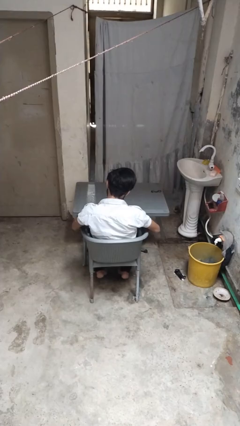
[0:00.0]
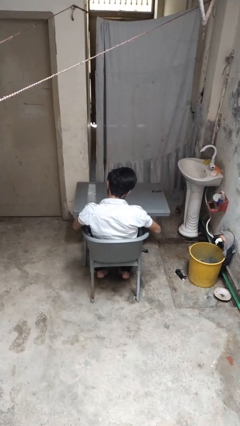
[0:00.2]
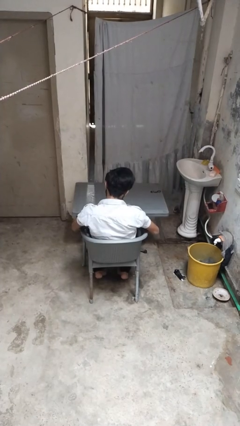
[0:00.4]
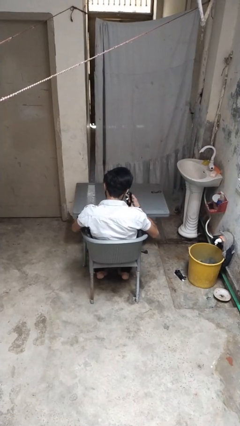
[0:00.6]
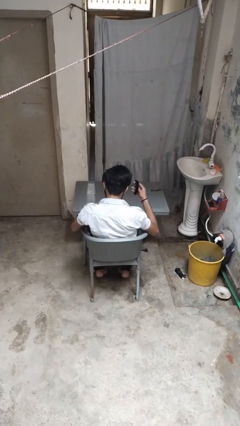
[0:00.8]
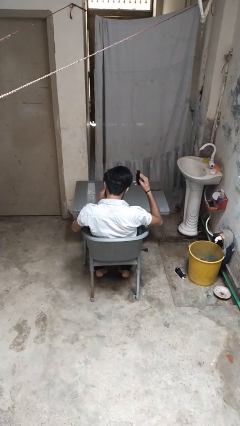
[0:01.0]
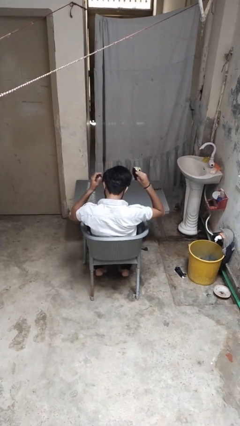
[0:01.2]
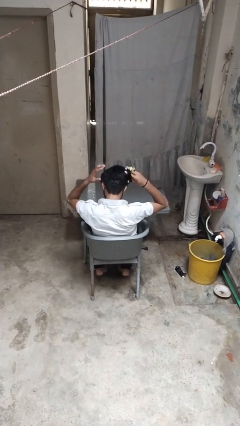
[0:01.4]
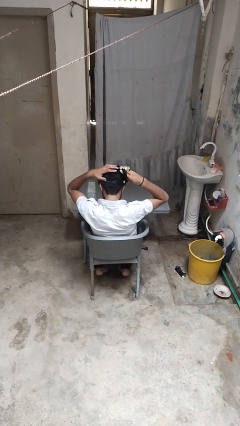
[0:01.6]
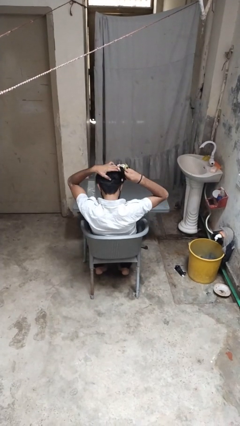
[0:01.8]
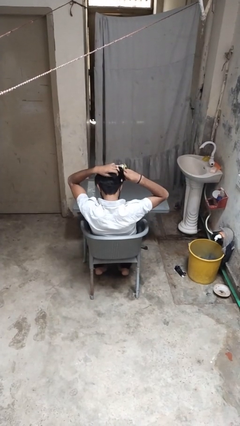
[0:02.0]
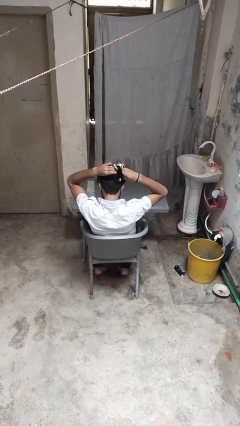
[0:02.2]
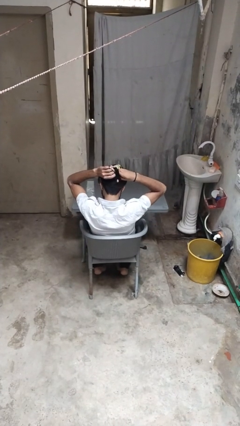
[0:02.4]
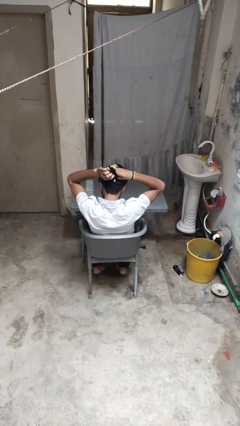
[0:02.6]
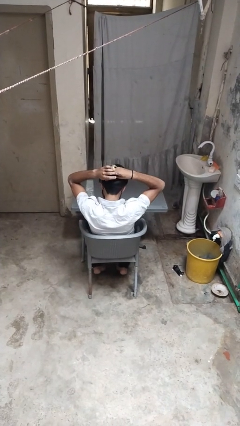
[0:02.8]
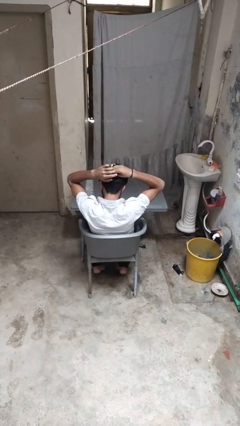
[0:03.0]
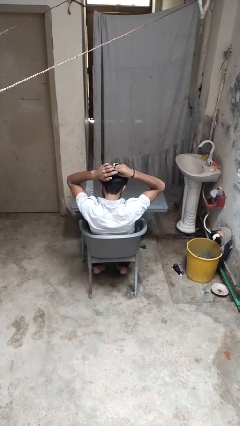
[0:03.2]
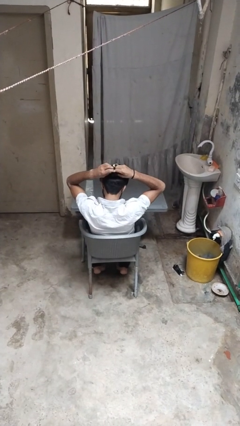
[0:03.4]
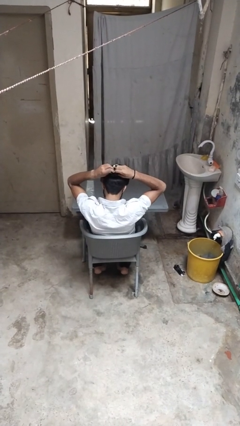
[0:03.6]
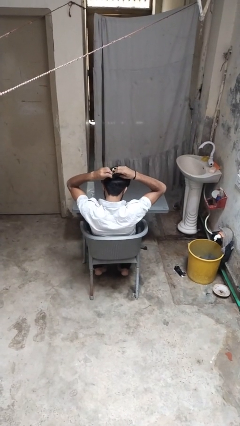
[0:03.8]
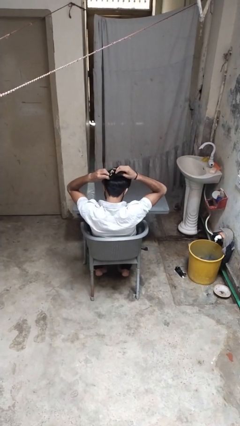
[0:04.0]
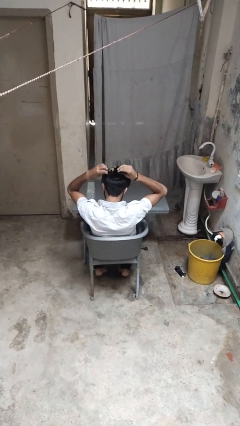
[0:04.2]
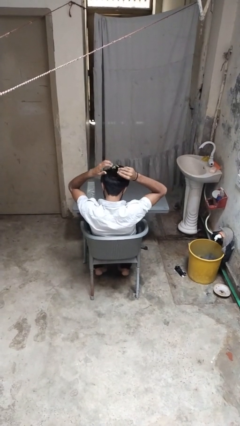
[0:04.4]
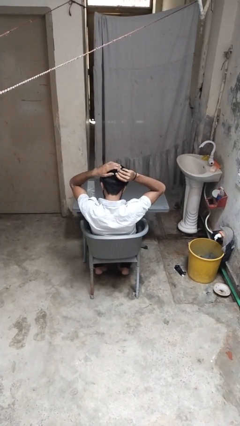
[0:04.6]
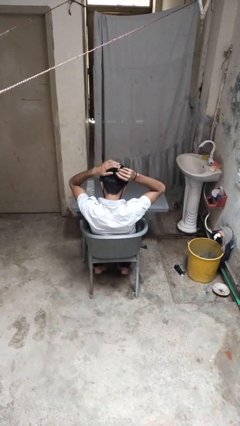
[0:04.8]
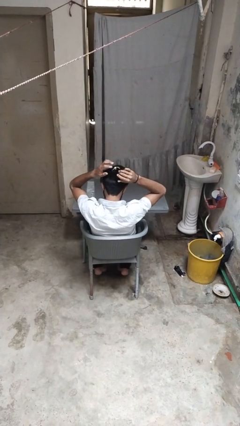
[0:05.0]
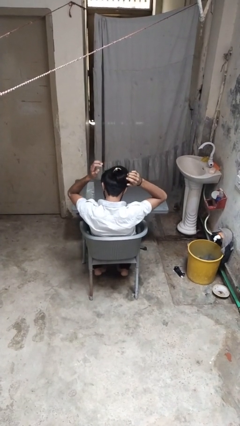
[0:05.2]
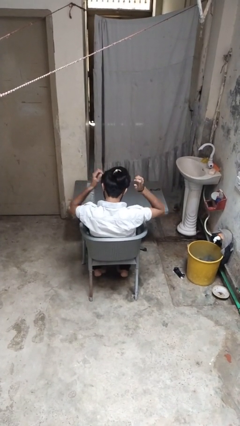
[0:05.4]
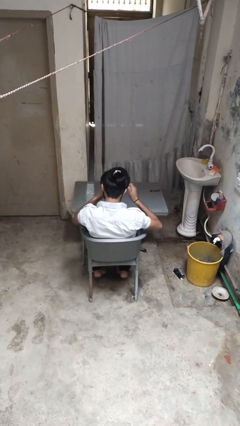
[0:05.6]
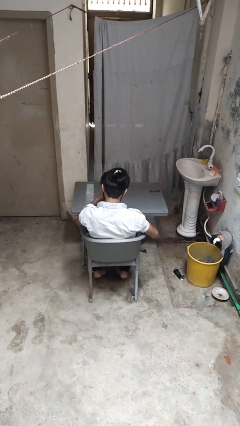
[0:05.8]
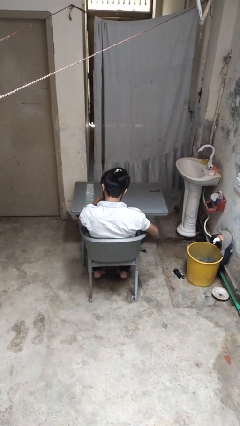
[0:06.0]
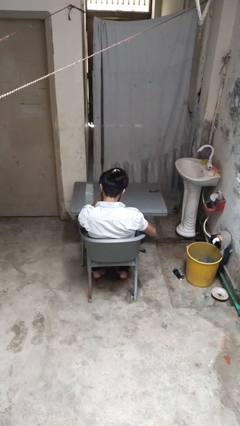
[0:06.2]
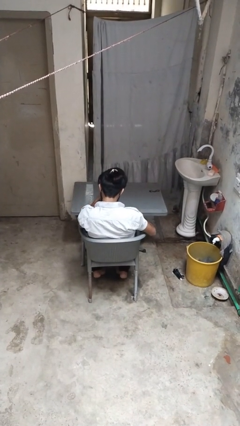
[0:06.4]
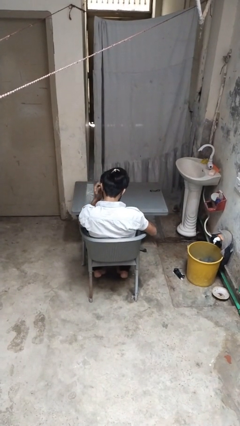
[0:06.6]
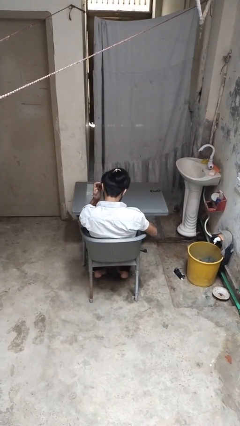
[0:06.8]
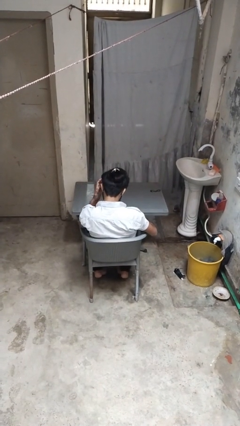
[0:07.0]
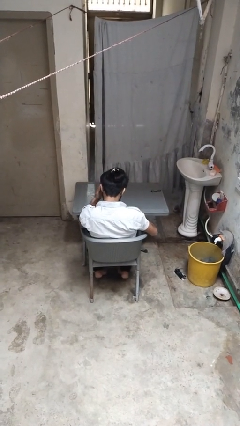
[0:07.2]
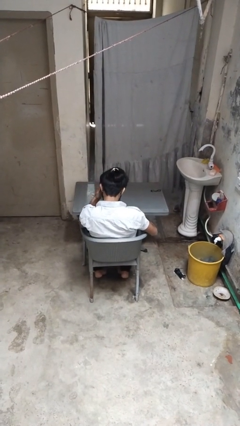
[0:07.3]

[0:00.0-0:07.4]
person puts hair in ponytail

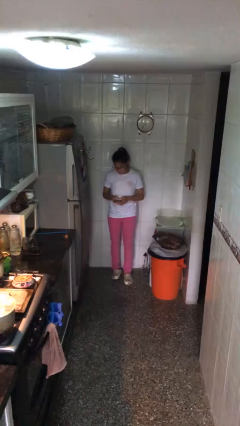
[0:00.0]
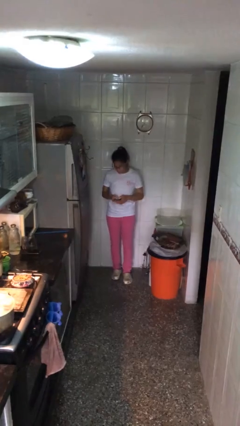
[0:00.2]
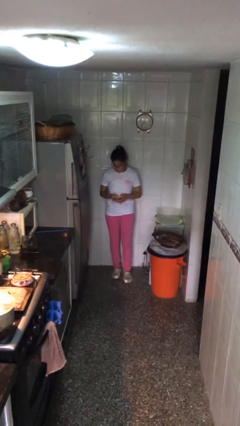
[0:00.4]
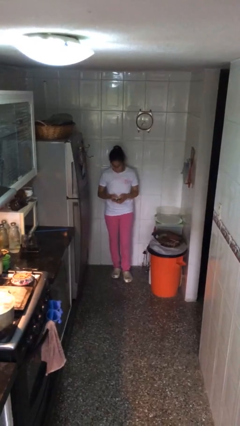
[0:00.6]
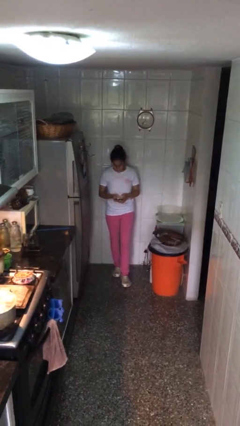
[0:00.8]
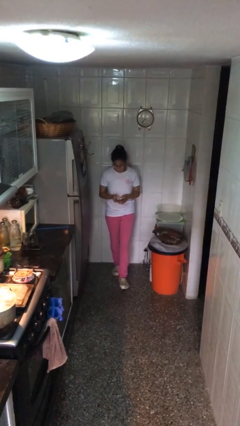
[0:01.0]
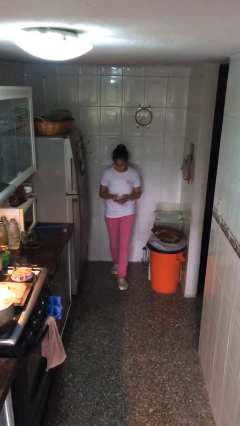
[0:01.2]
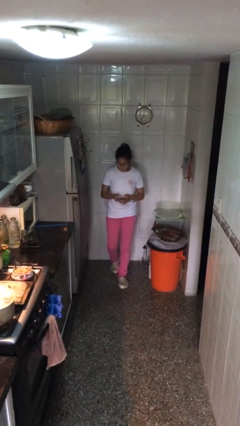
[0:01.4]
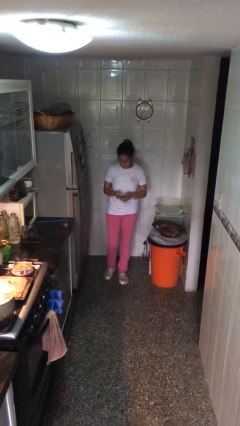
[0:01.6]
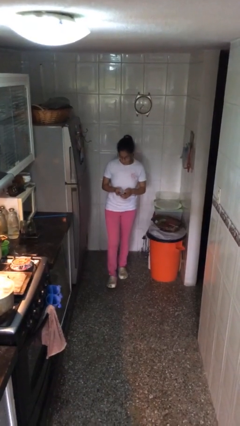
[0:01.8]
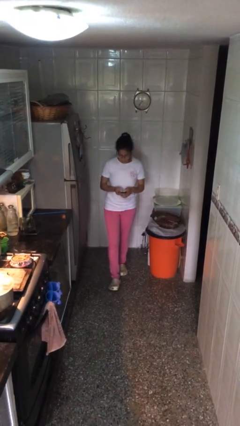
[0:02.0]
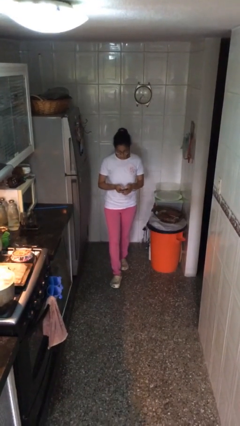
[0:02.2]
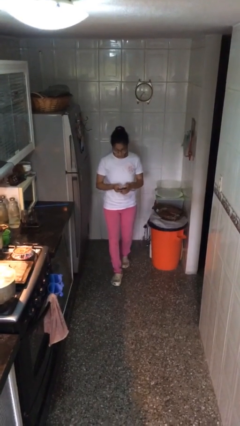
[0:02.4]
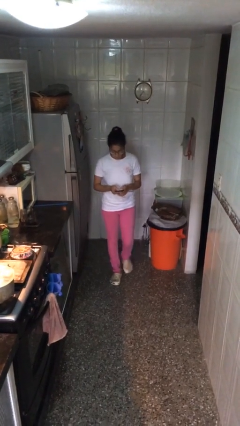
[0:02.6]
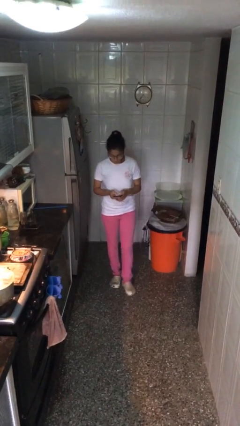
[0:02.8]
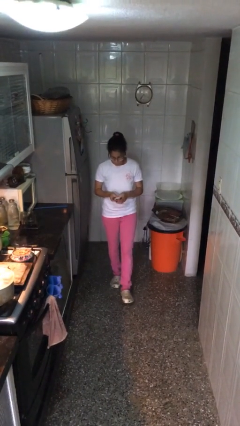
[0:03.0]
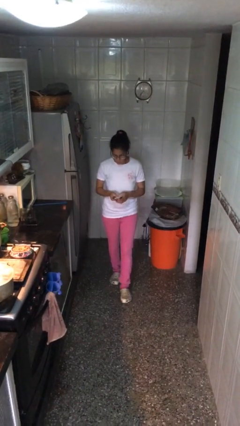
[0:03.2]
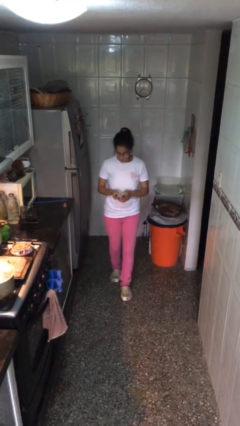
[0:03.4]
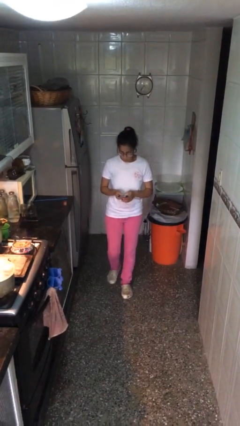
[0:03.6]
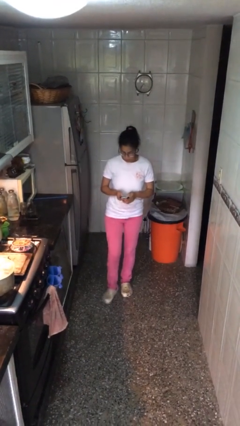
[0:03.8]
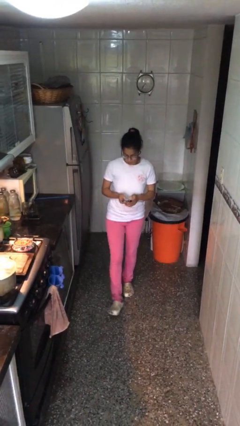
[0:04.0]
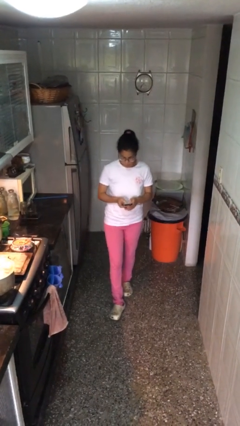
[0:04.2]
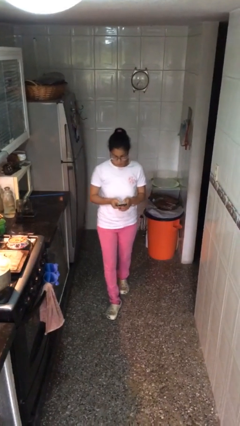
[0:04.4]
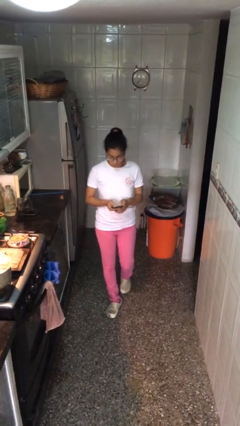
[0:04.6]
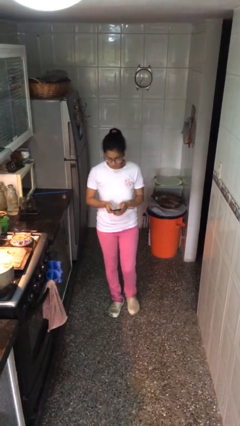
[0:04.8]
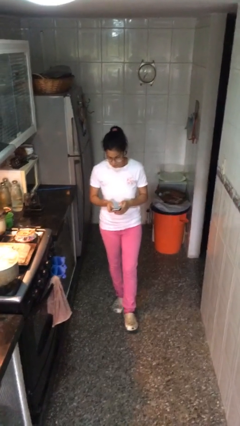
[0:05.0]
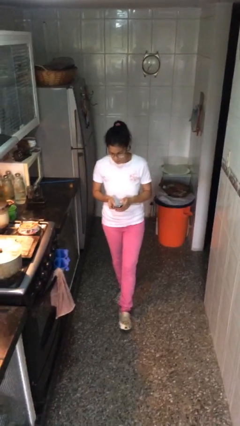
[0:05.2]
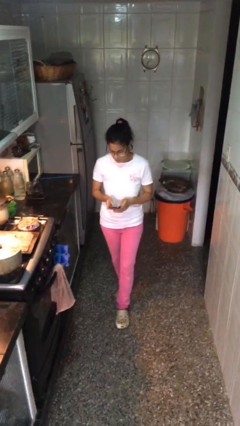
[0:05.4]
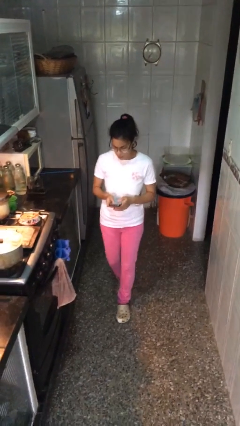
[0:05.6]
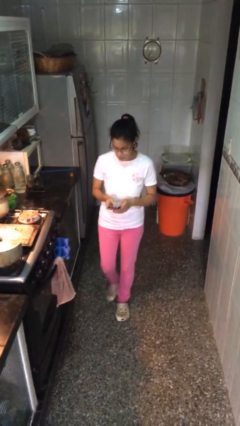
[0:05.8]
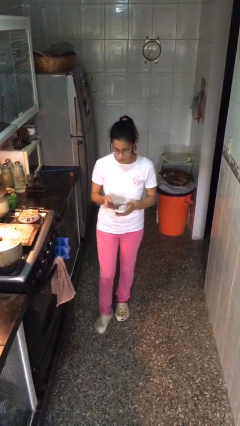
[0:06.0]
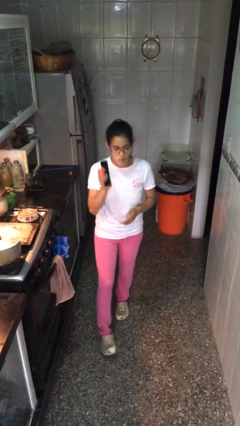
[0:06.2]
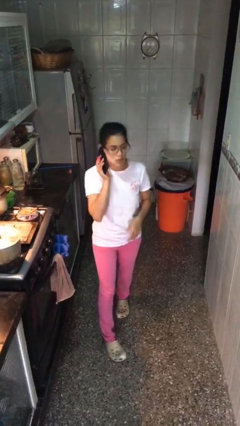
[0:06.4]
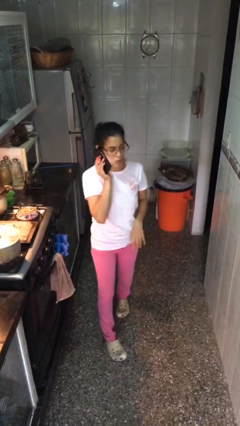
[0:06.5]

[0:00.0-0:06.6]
person texts on phone

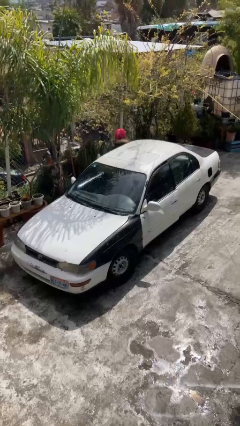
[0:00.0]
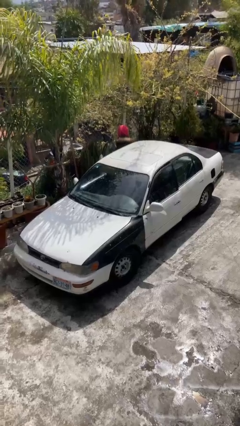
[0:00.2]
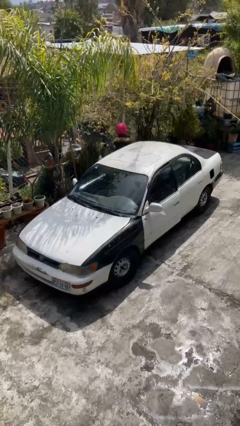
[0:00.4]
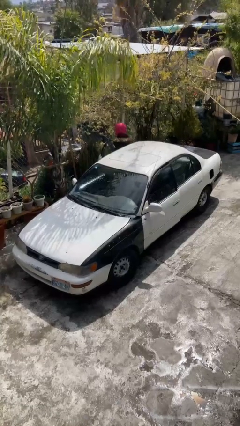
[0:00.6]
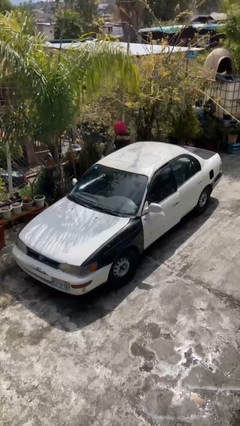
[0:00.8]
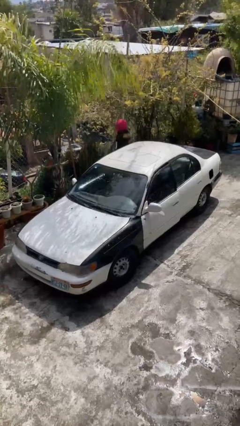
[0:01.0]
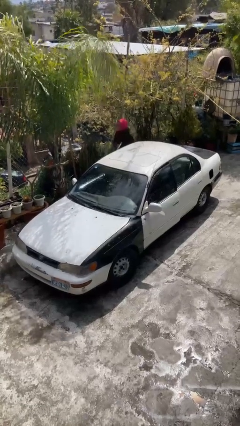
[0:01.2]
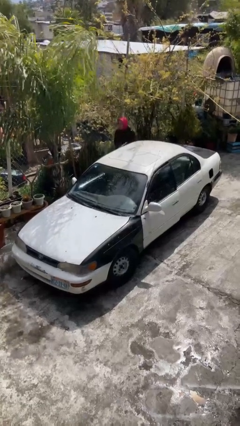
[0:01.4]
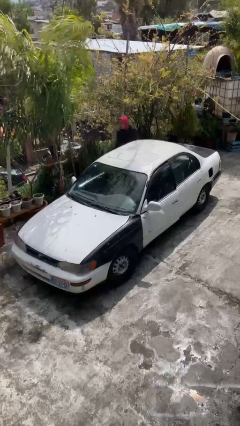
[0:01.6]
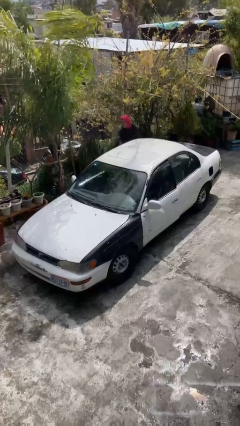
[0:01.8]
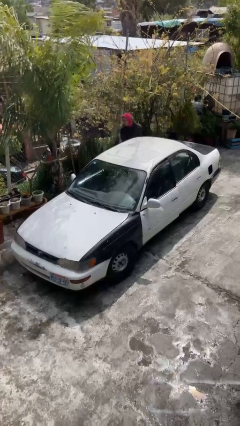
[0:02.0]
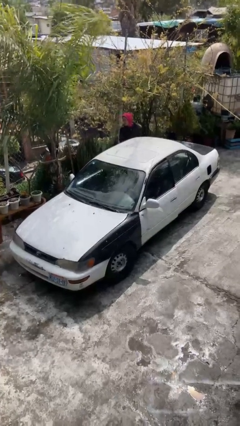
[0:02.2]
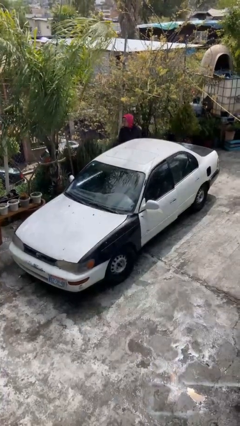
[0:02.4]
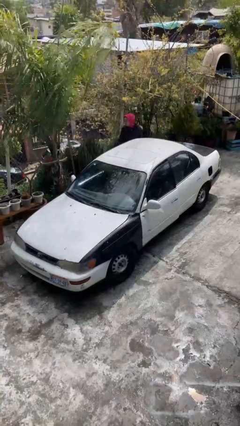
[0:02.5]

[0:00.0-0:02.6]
car drops off person

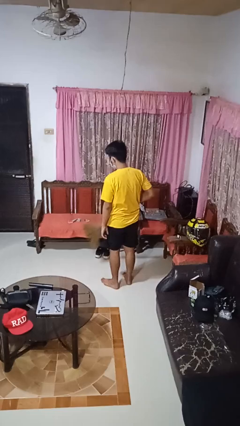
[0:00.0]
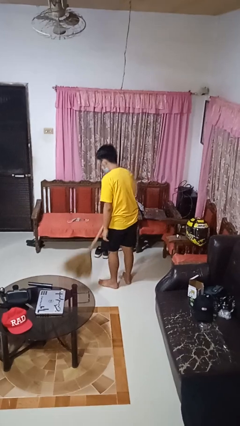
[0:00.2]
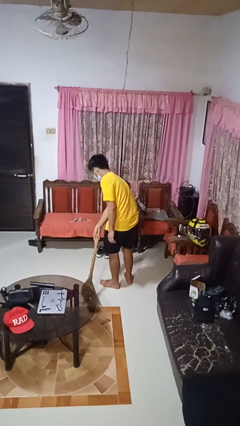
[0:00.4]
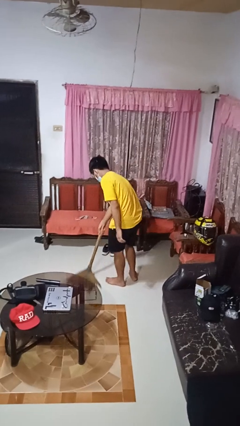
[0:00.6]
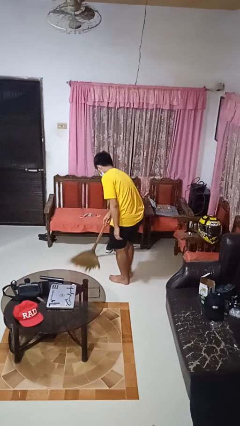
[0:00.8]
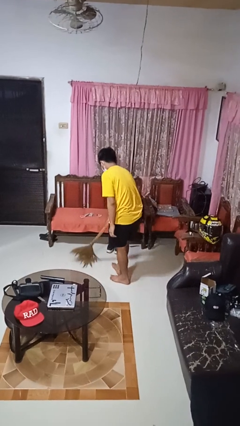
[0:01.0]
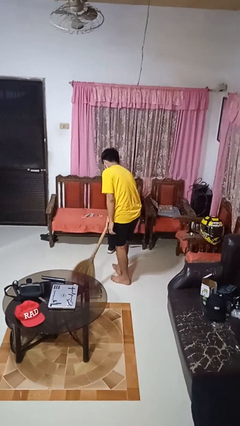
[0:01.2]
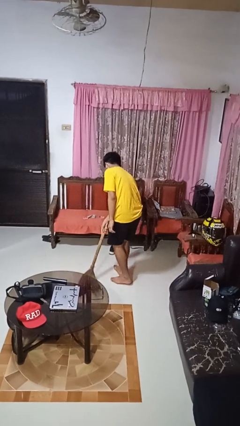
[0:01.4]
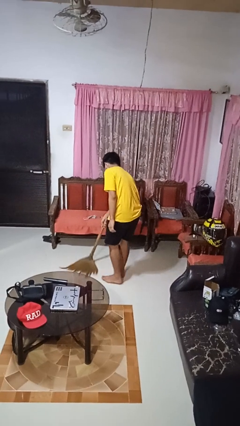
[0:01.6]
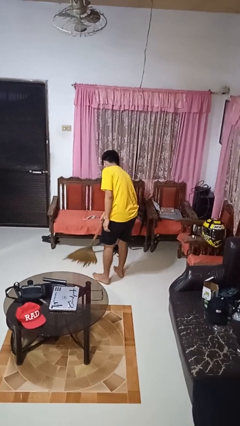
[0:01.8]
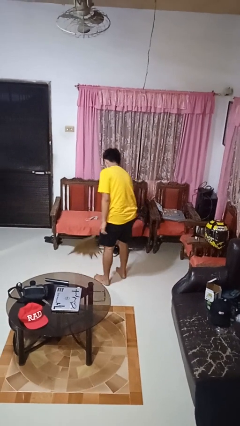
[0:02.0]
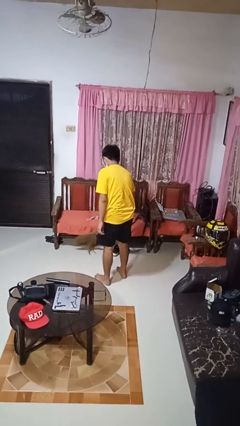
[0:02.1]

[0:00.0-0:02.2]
person sweeps floor
